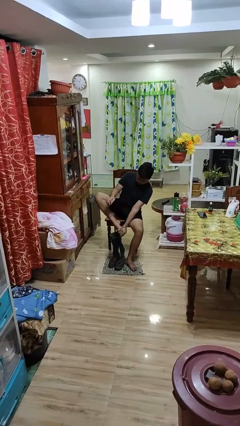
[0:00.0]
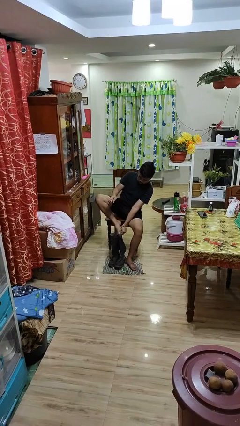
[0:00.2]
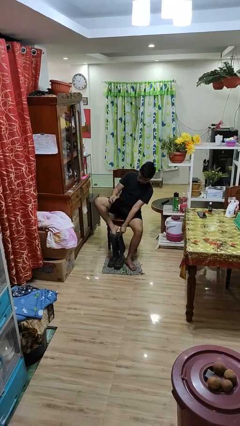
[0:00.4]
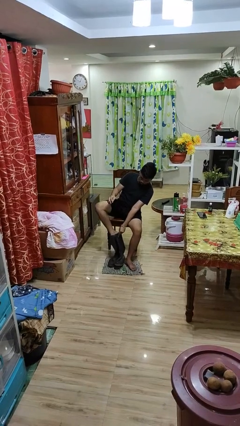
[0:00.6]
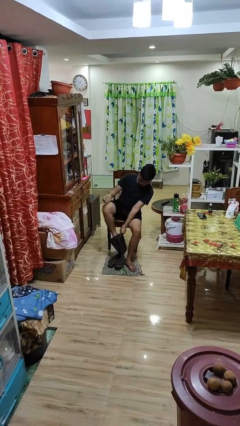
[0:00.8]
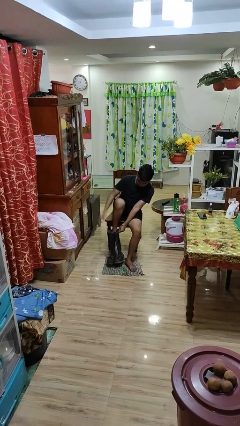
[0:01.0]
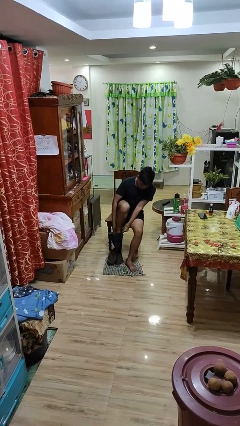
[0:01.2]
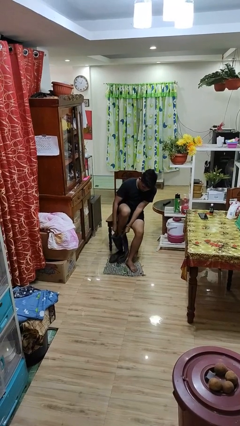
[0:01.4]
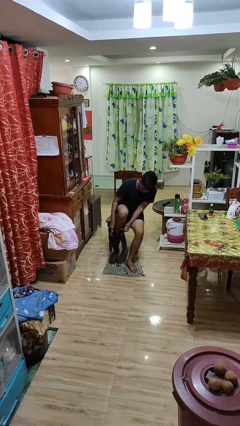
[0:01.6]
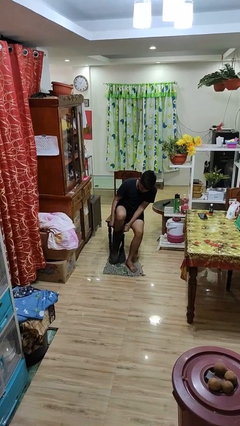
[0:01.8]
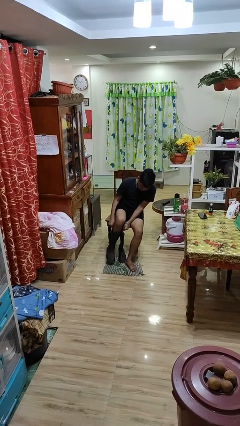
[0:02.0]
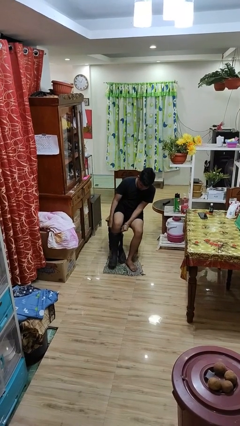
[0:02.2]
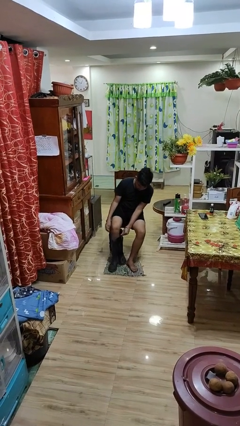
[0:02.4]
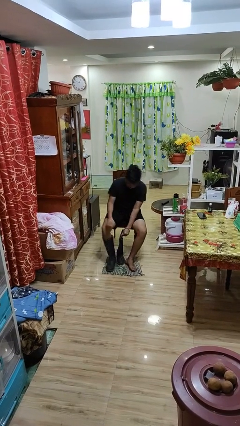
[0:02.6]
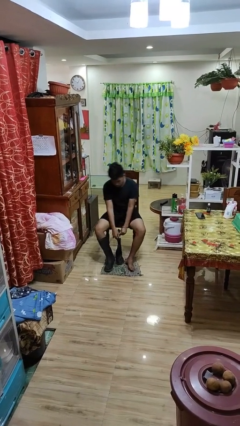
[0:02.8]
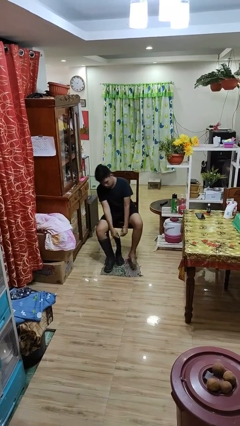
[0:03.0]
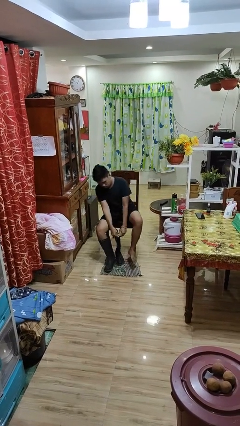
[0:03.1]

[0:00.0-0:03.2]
person uses television remote

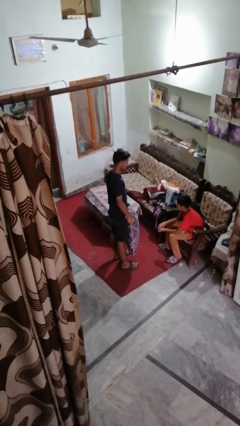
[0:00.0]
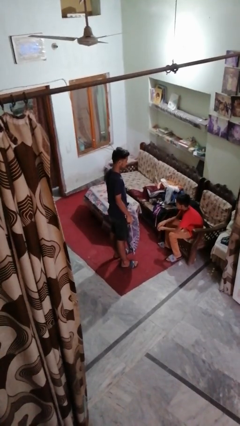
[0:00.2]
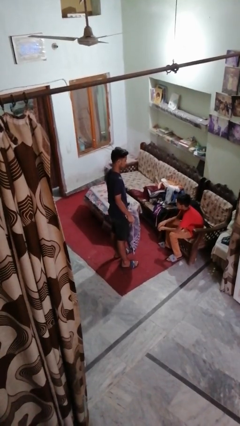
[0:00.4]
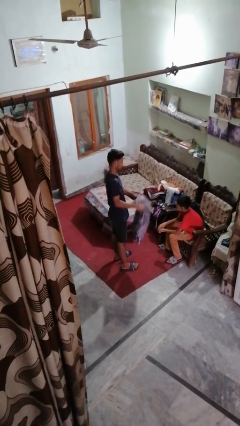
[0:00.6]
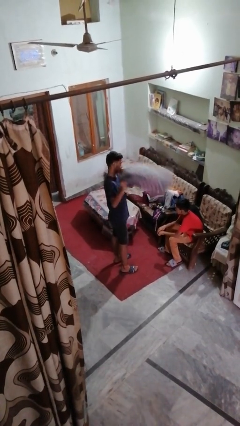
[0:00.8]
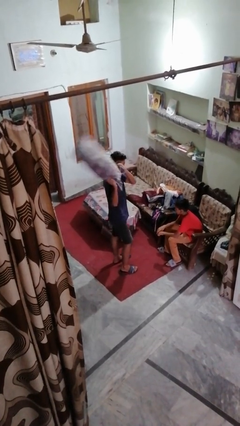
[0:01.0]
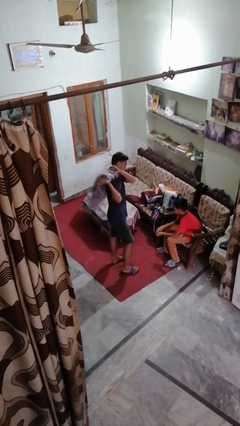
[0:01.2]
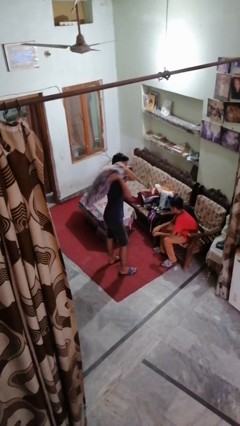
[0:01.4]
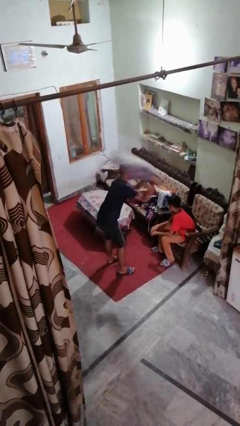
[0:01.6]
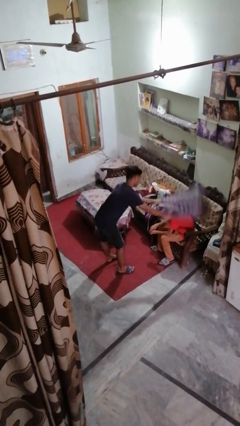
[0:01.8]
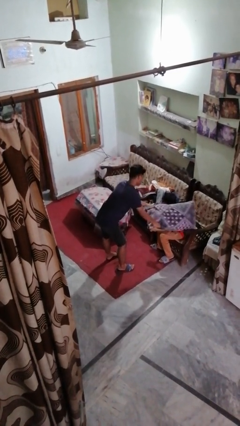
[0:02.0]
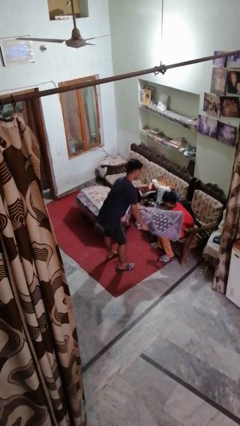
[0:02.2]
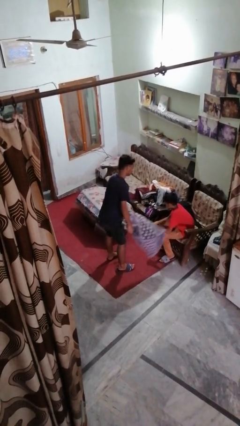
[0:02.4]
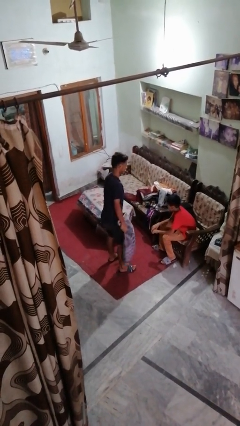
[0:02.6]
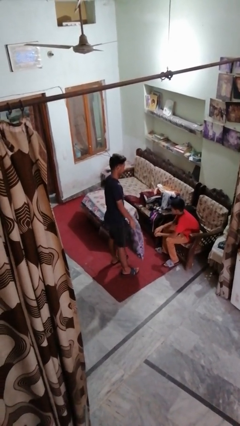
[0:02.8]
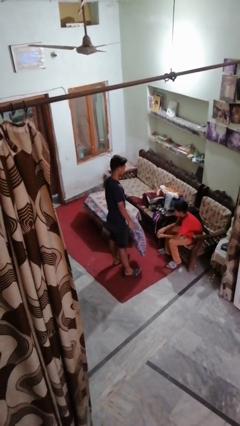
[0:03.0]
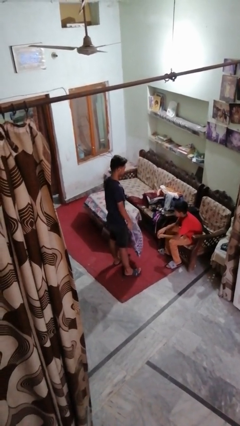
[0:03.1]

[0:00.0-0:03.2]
person hits person with pillow

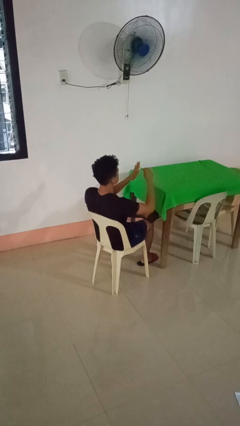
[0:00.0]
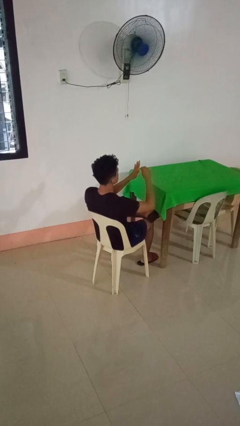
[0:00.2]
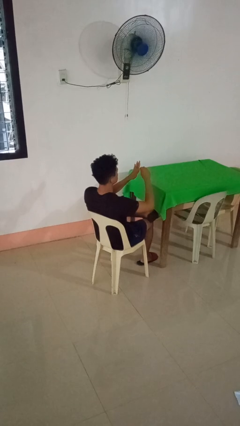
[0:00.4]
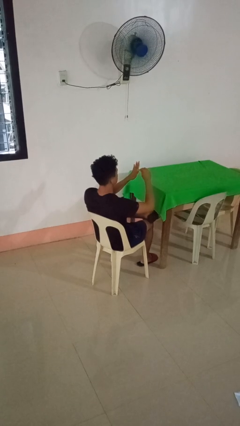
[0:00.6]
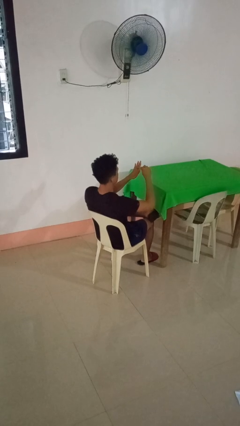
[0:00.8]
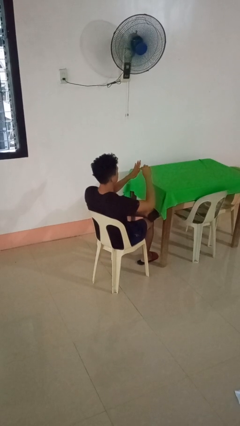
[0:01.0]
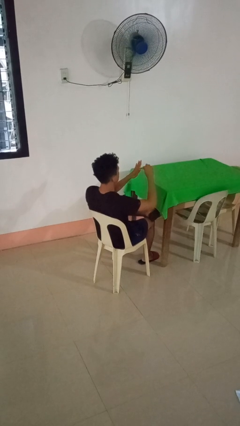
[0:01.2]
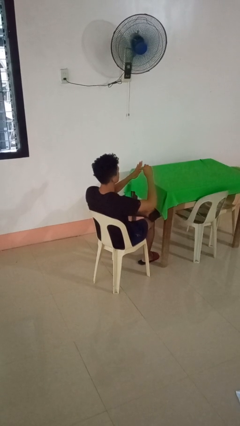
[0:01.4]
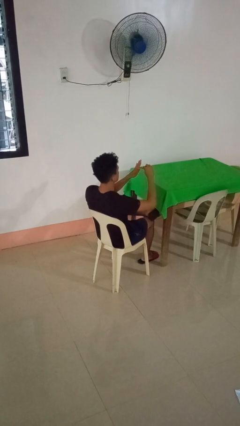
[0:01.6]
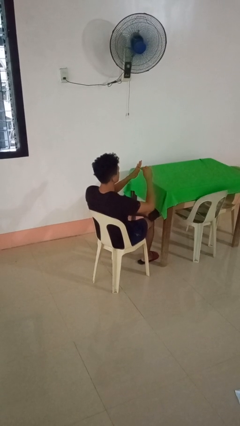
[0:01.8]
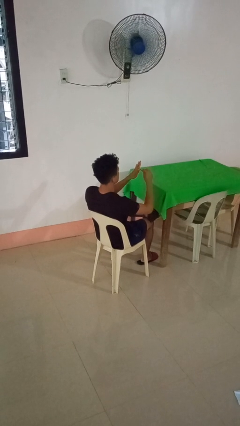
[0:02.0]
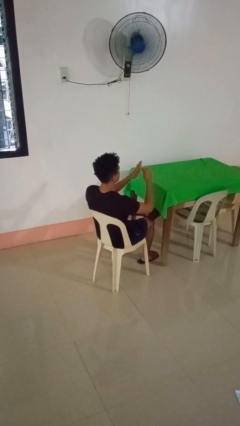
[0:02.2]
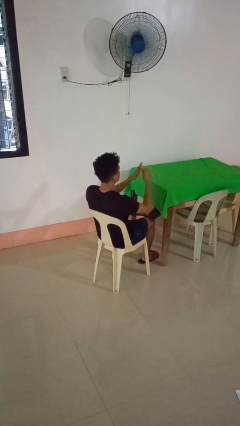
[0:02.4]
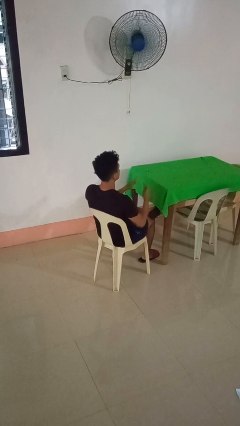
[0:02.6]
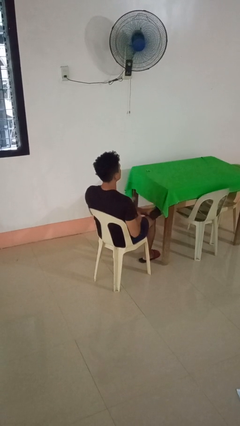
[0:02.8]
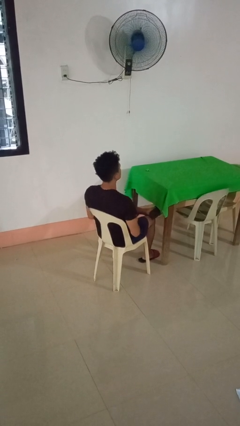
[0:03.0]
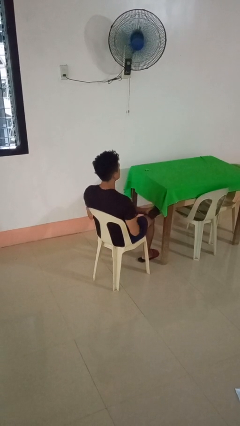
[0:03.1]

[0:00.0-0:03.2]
person files fingernails

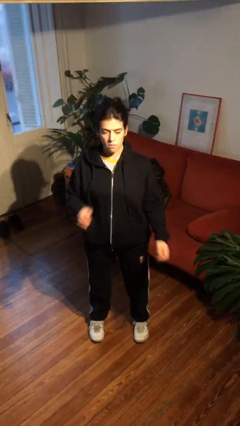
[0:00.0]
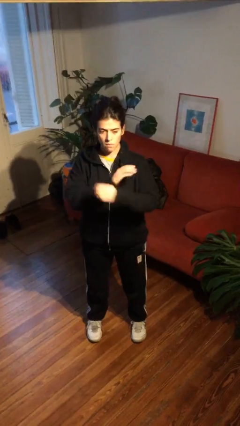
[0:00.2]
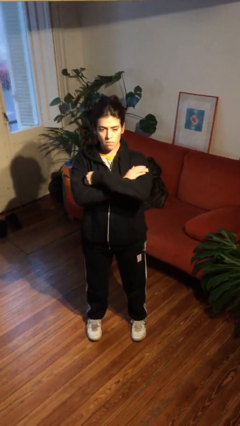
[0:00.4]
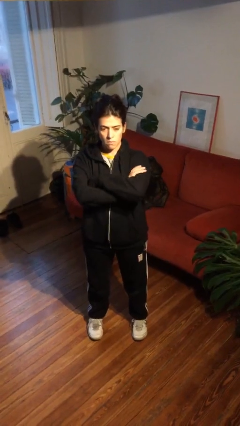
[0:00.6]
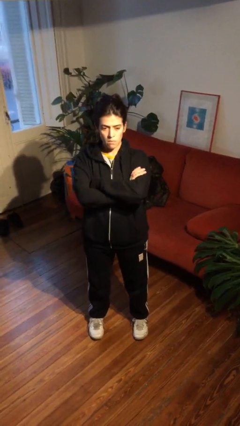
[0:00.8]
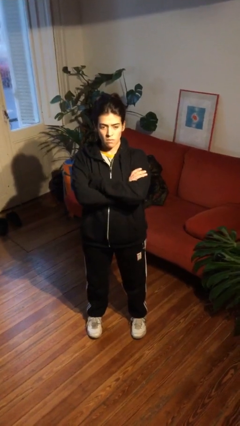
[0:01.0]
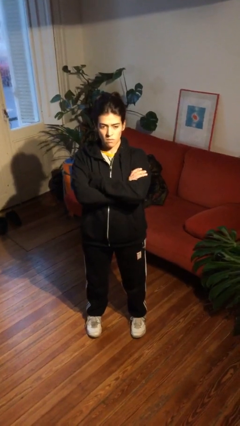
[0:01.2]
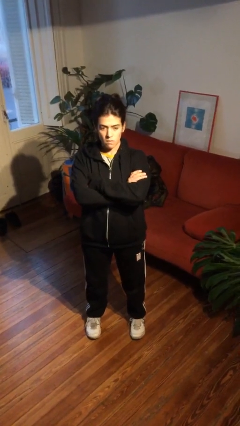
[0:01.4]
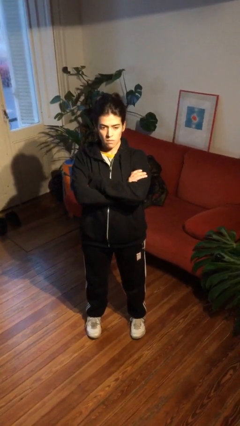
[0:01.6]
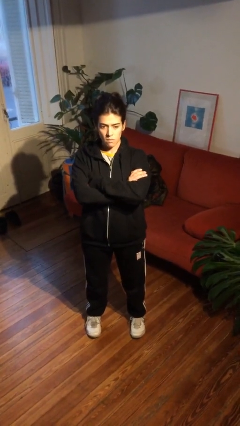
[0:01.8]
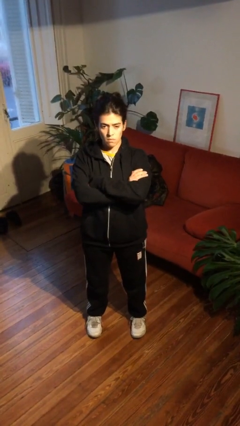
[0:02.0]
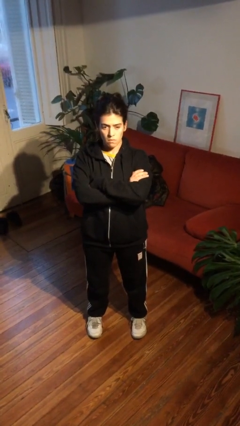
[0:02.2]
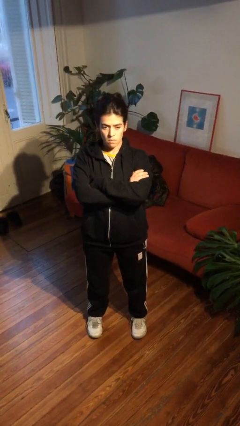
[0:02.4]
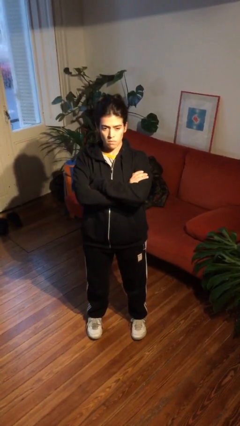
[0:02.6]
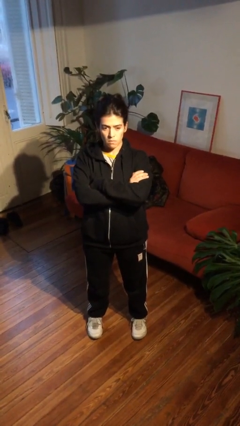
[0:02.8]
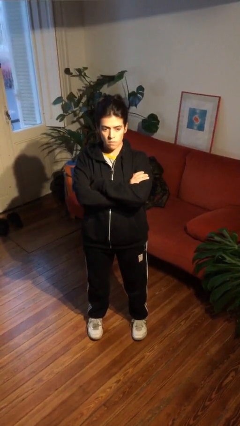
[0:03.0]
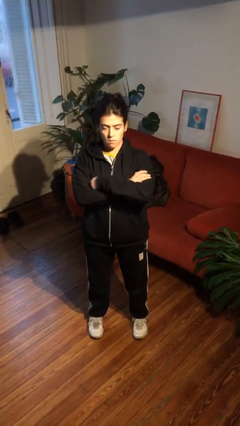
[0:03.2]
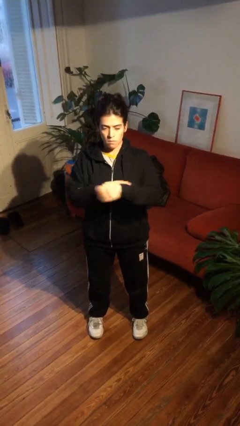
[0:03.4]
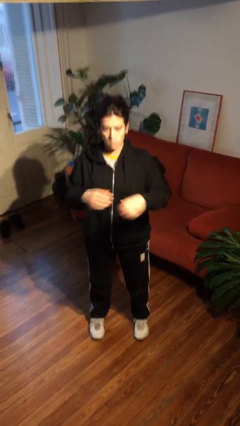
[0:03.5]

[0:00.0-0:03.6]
person crosses arms

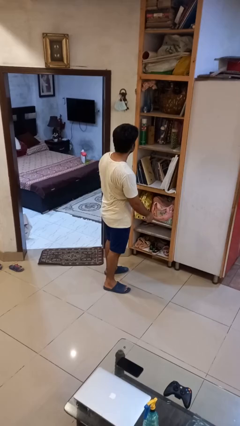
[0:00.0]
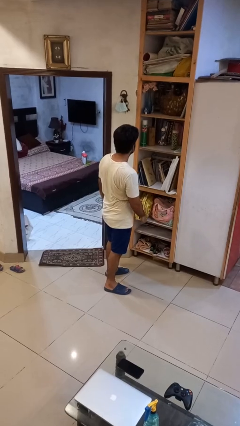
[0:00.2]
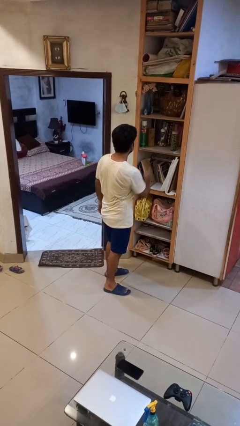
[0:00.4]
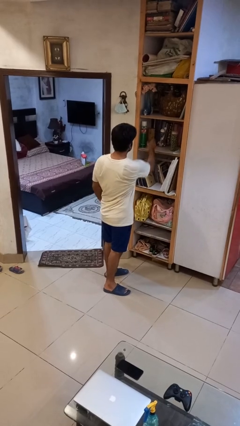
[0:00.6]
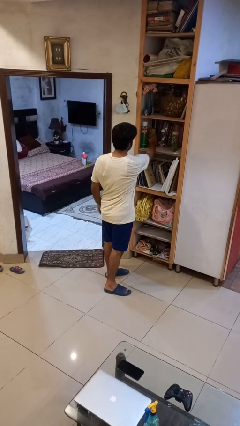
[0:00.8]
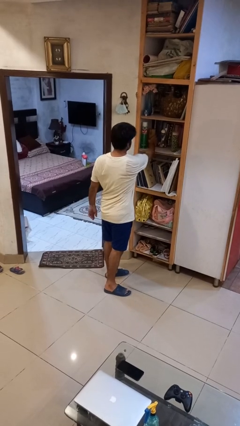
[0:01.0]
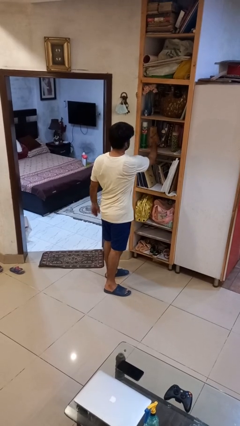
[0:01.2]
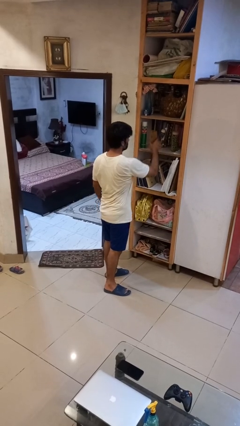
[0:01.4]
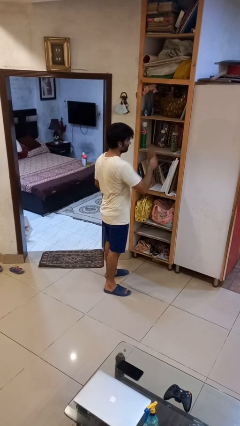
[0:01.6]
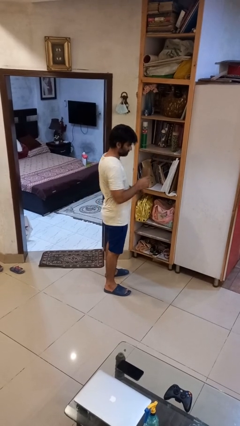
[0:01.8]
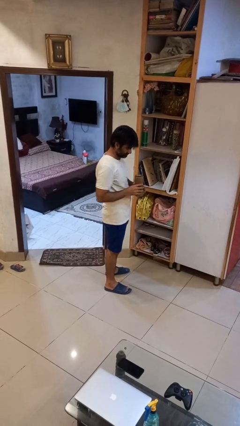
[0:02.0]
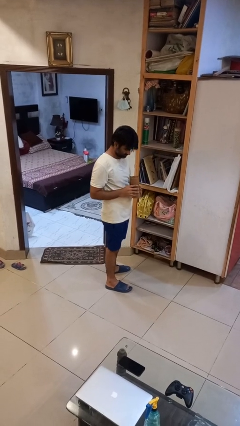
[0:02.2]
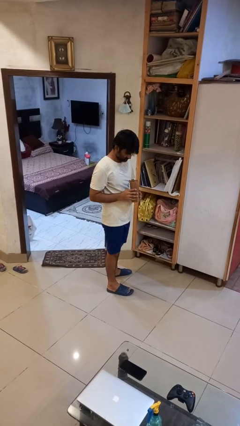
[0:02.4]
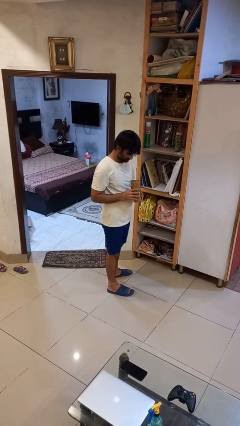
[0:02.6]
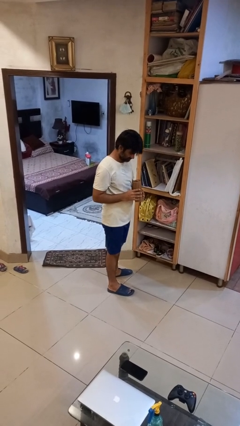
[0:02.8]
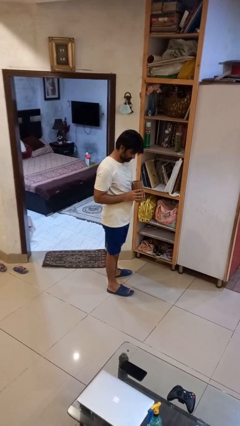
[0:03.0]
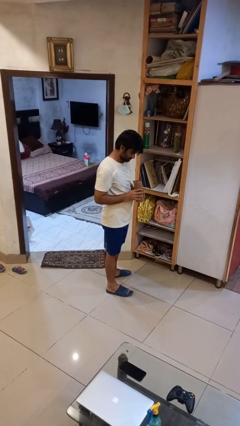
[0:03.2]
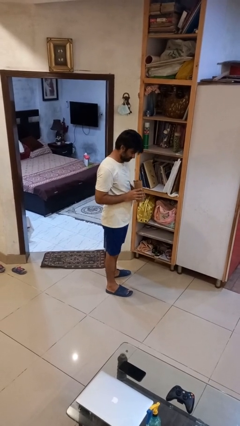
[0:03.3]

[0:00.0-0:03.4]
person picks up object from cabinet

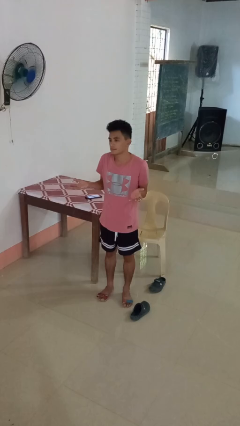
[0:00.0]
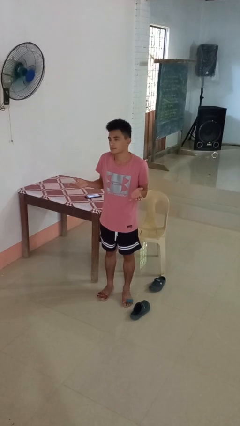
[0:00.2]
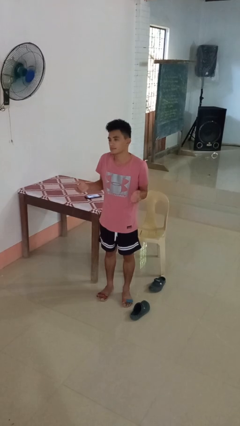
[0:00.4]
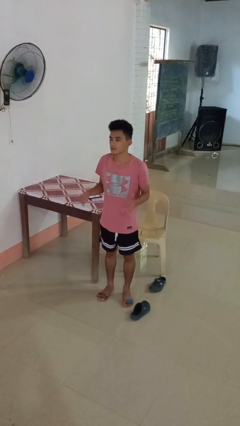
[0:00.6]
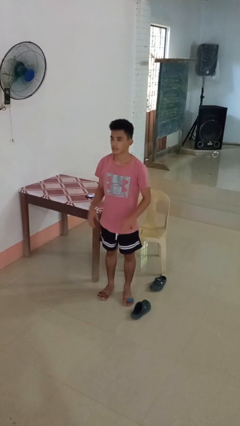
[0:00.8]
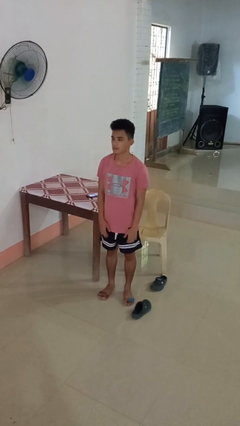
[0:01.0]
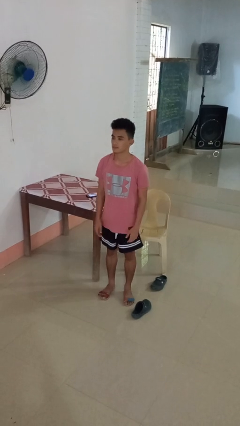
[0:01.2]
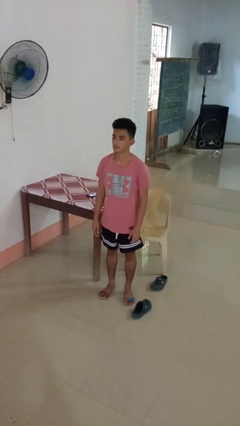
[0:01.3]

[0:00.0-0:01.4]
person shrugs
